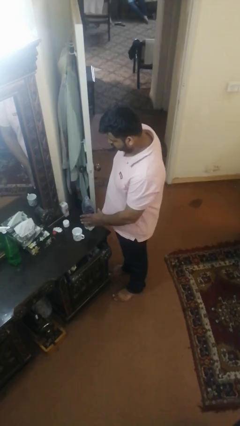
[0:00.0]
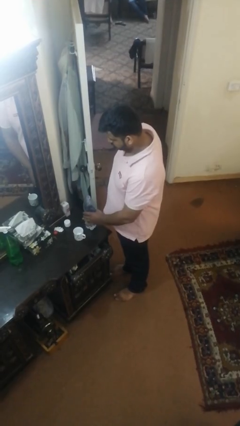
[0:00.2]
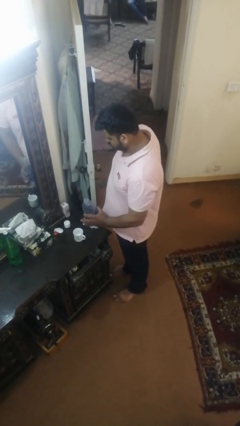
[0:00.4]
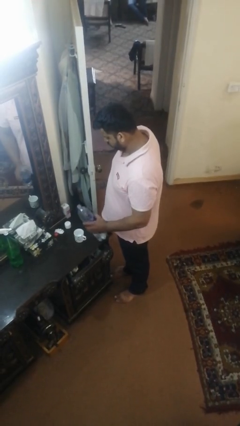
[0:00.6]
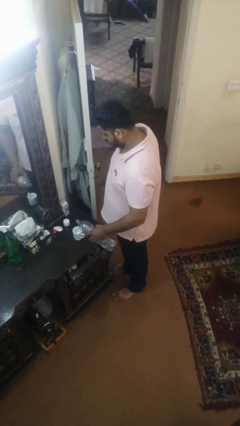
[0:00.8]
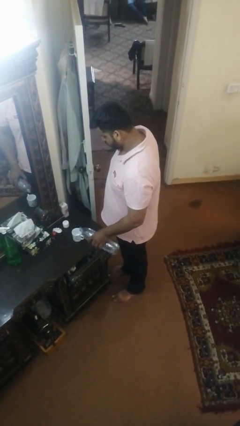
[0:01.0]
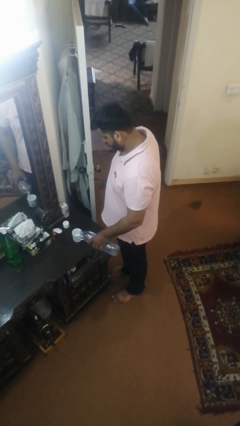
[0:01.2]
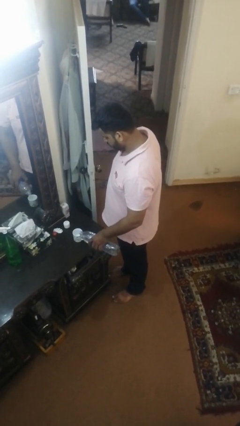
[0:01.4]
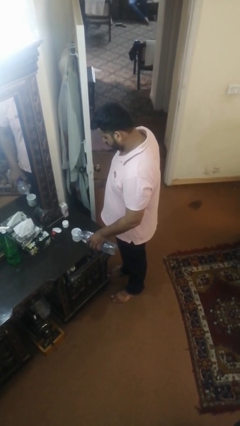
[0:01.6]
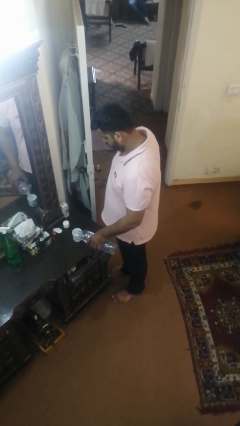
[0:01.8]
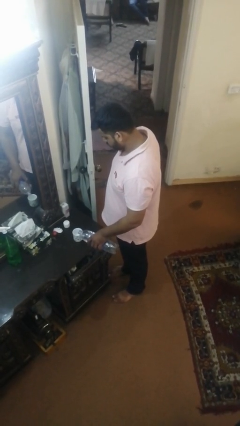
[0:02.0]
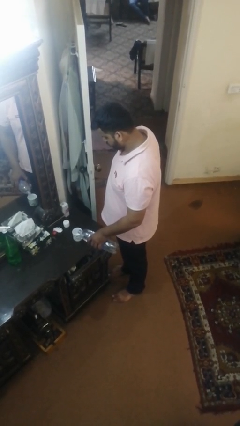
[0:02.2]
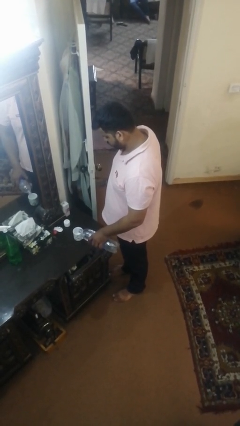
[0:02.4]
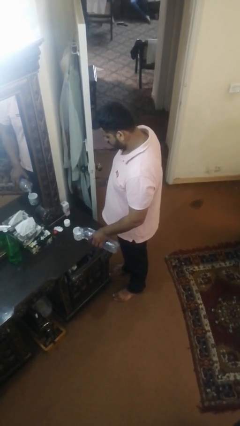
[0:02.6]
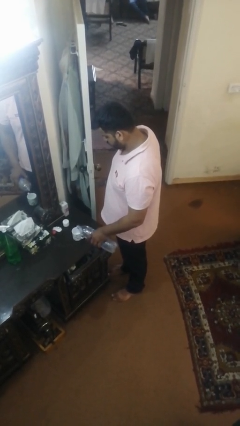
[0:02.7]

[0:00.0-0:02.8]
person pours liquid into cup

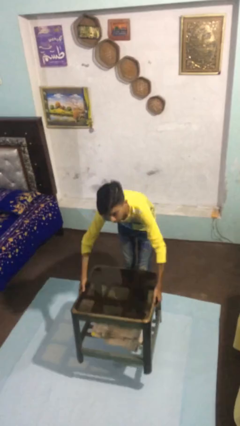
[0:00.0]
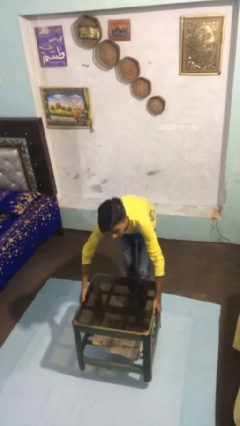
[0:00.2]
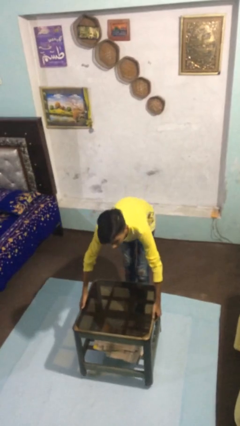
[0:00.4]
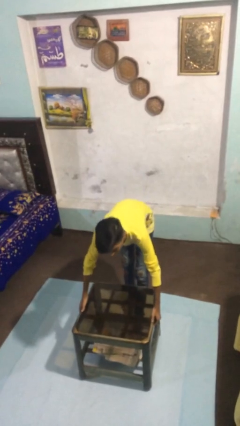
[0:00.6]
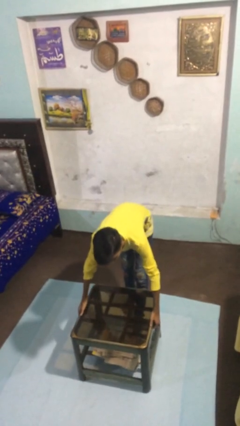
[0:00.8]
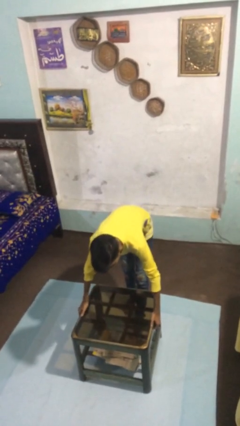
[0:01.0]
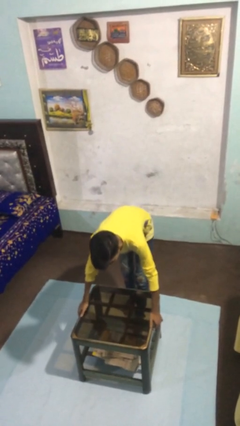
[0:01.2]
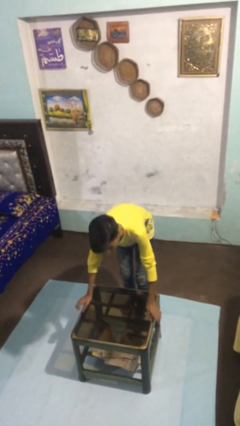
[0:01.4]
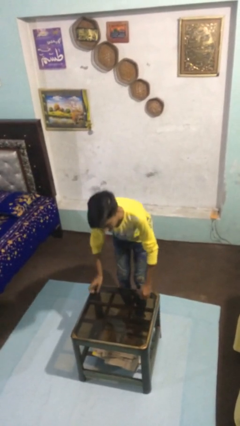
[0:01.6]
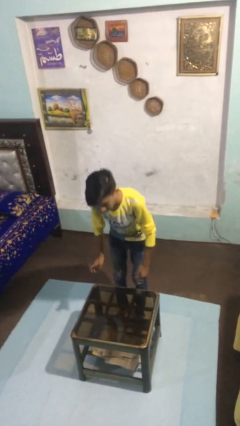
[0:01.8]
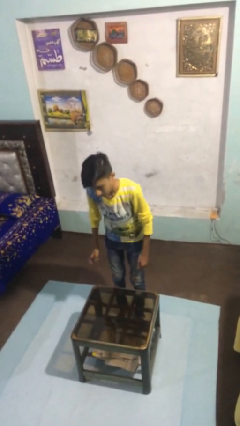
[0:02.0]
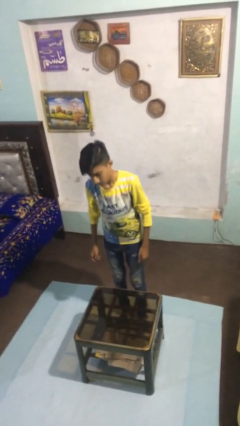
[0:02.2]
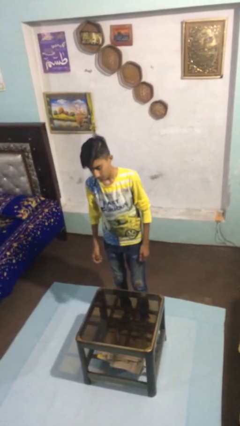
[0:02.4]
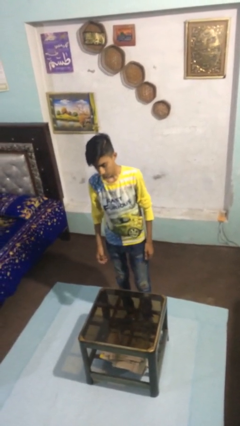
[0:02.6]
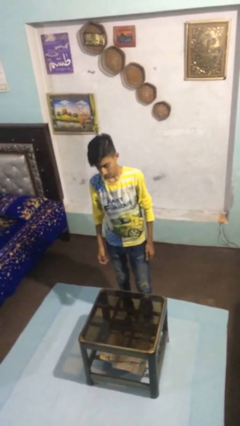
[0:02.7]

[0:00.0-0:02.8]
person puts down object on floor

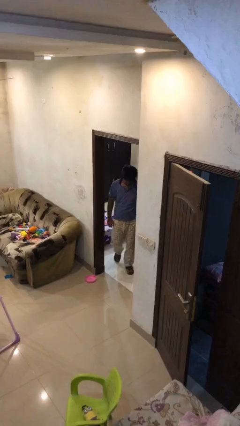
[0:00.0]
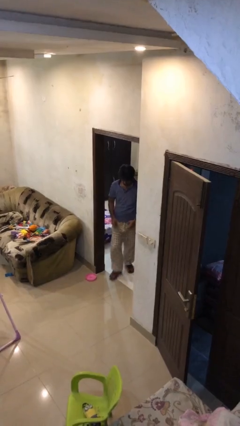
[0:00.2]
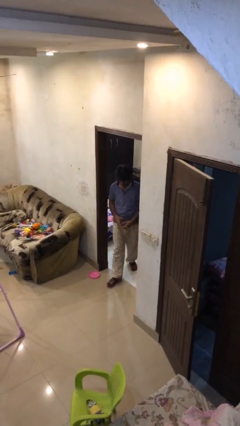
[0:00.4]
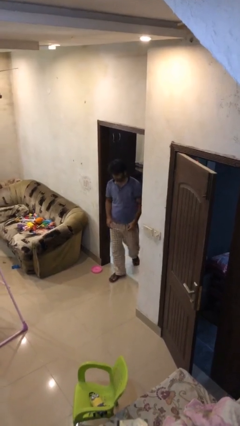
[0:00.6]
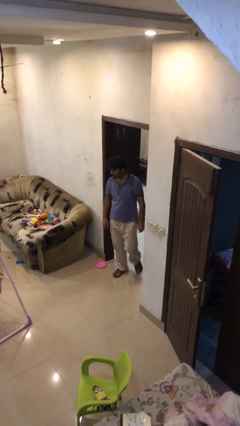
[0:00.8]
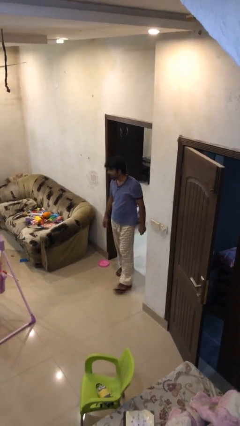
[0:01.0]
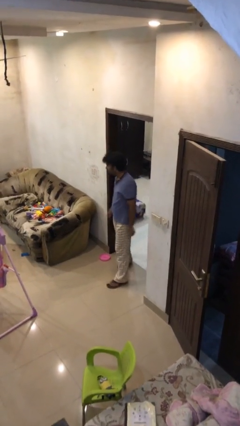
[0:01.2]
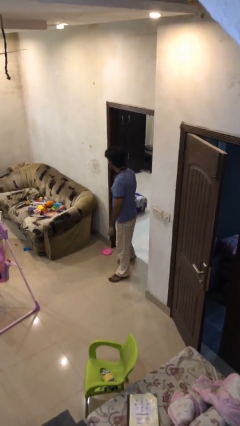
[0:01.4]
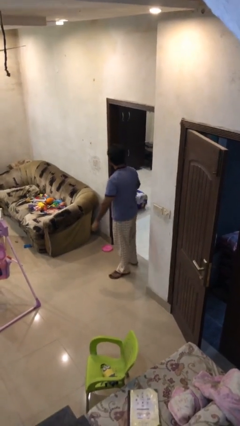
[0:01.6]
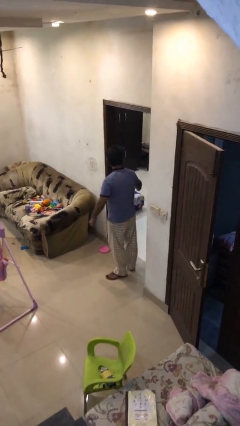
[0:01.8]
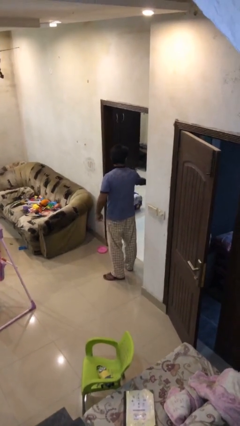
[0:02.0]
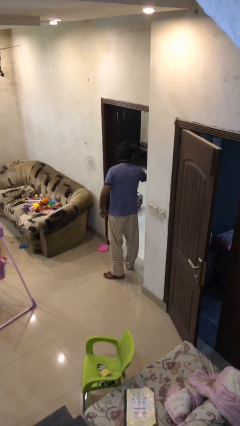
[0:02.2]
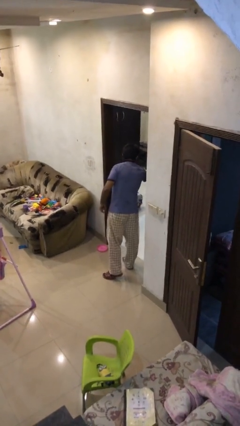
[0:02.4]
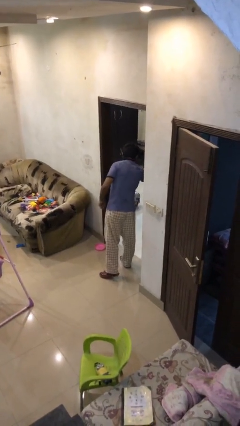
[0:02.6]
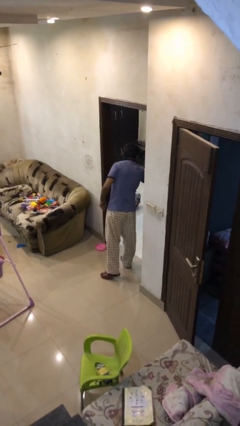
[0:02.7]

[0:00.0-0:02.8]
person enters scene through structure

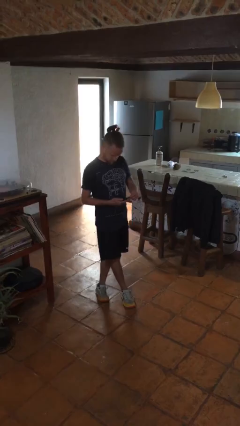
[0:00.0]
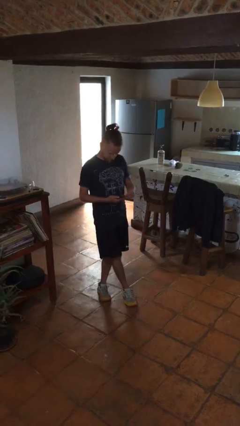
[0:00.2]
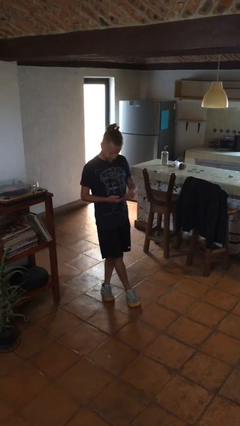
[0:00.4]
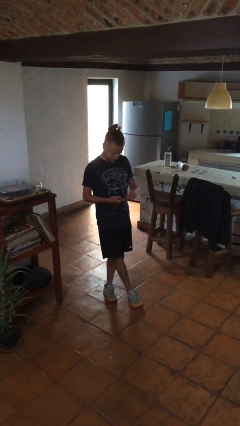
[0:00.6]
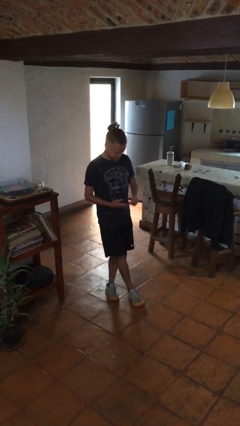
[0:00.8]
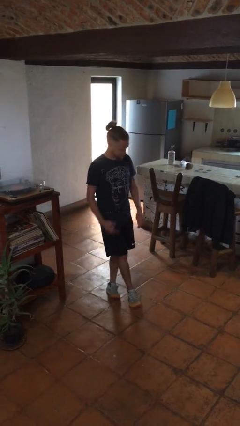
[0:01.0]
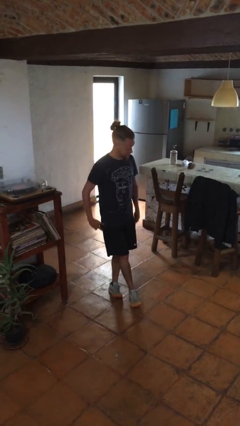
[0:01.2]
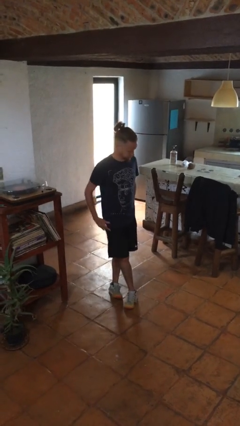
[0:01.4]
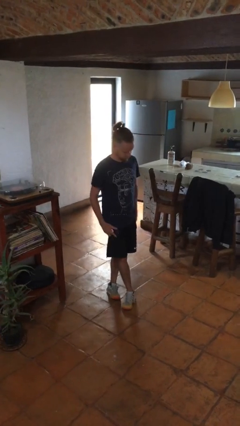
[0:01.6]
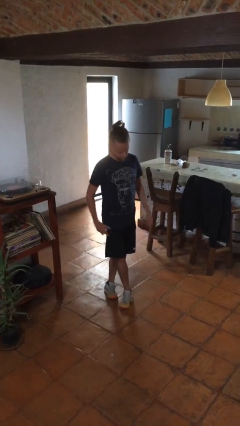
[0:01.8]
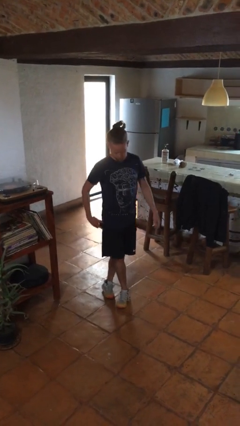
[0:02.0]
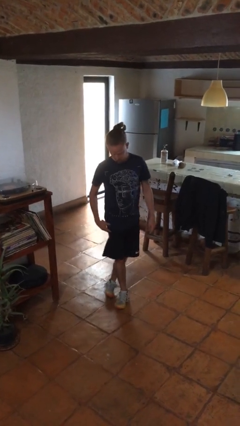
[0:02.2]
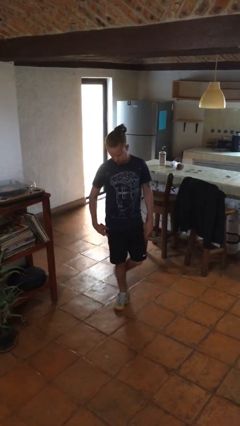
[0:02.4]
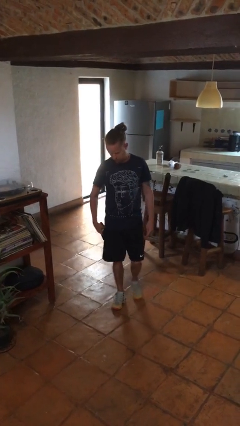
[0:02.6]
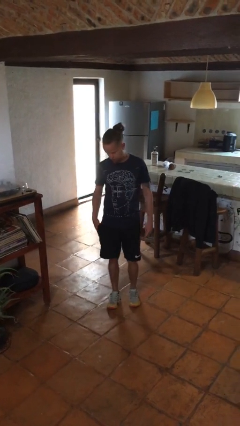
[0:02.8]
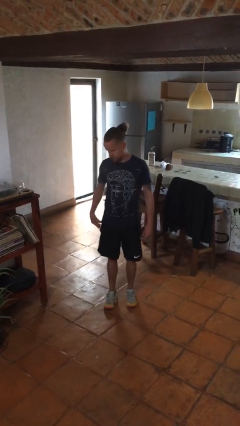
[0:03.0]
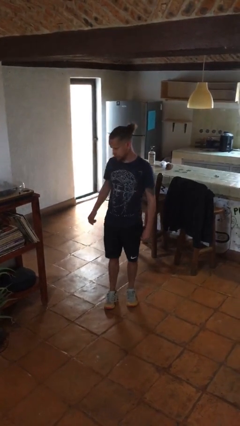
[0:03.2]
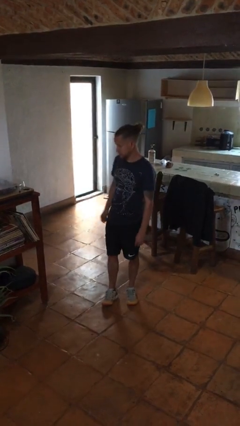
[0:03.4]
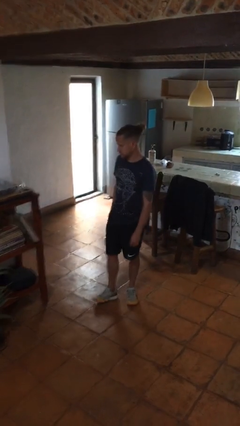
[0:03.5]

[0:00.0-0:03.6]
person puts phone into pocket

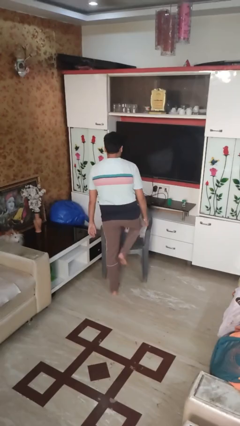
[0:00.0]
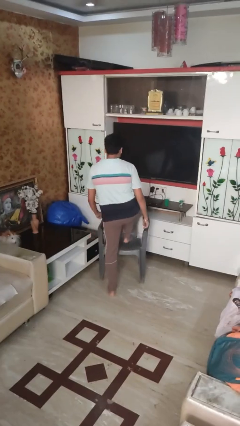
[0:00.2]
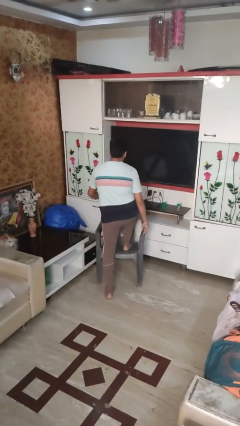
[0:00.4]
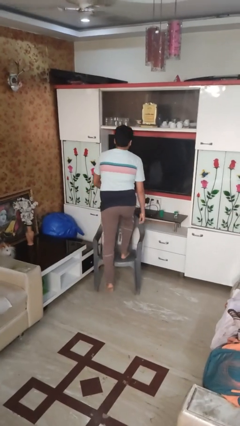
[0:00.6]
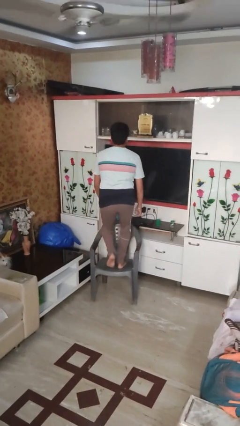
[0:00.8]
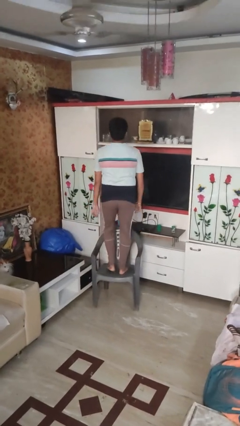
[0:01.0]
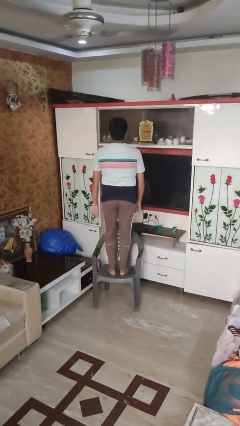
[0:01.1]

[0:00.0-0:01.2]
person climbs on chair

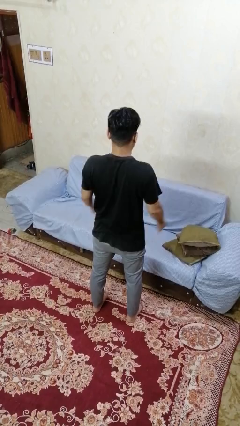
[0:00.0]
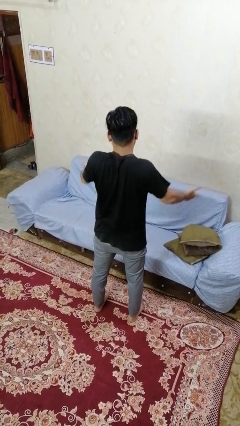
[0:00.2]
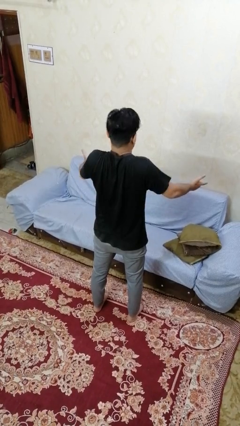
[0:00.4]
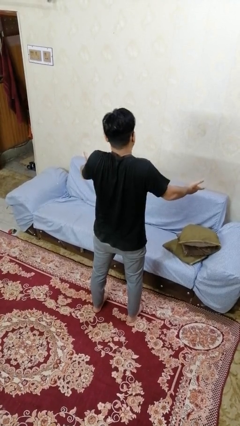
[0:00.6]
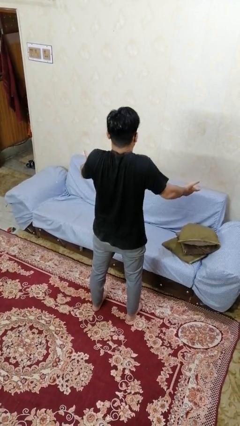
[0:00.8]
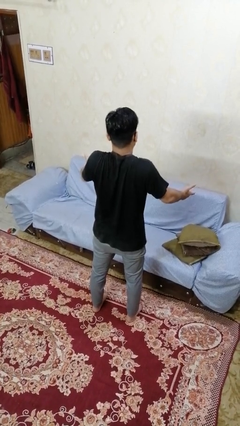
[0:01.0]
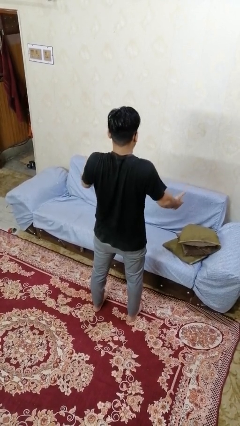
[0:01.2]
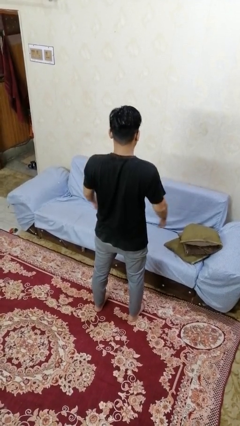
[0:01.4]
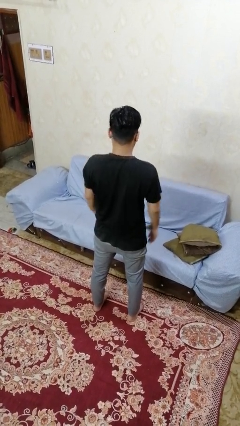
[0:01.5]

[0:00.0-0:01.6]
person shrugs

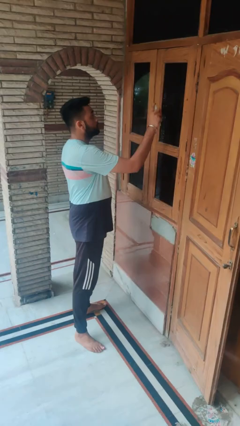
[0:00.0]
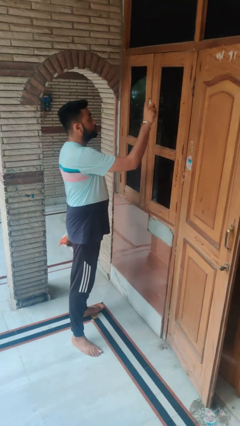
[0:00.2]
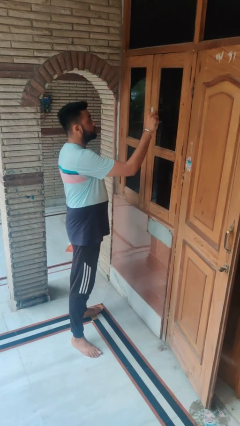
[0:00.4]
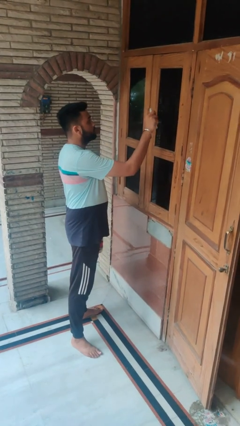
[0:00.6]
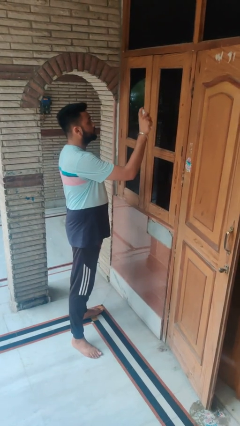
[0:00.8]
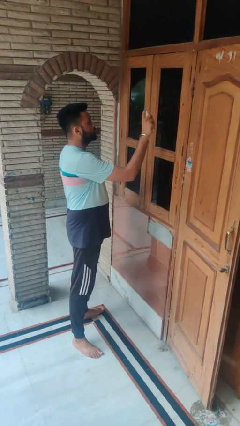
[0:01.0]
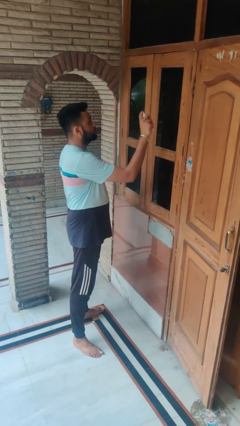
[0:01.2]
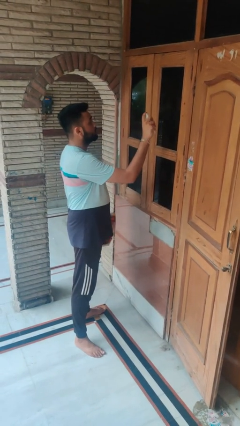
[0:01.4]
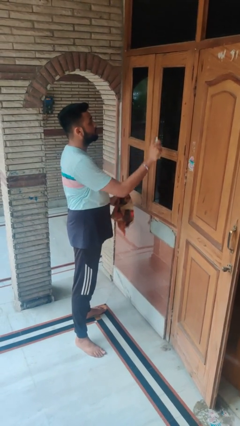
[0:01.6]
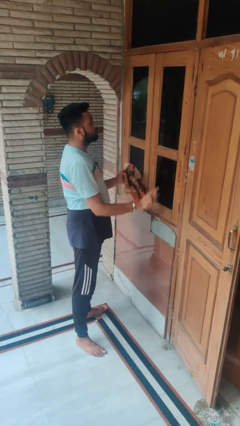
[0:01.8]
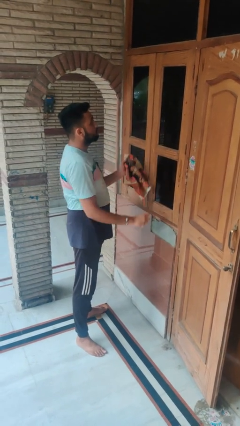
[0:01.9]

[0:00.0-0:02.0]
person sprays from bottle
